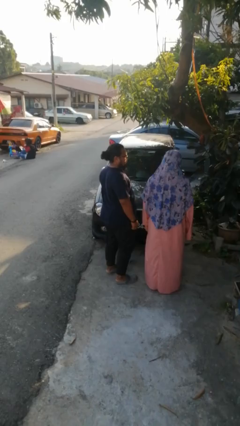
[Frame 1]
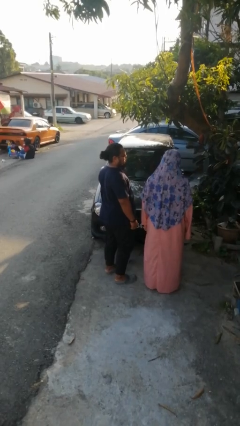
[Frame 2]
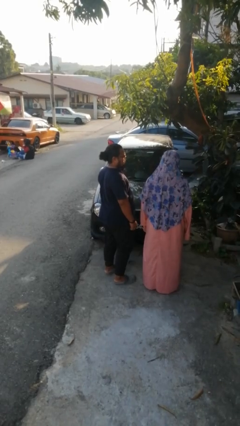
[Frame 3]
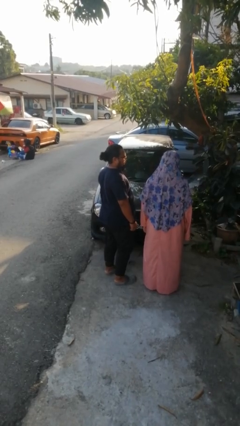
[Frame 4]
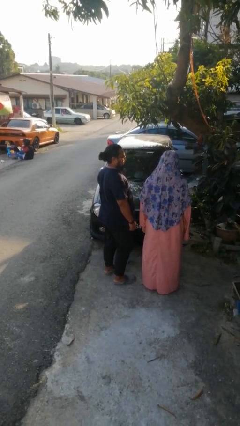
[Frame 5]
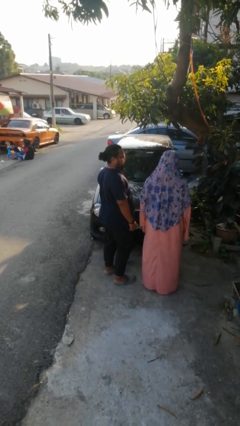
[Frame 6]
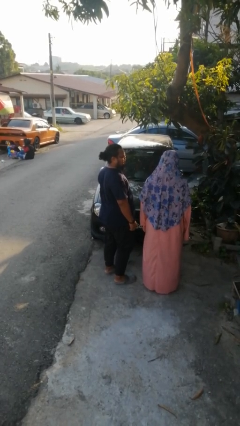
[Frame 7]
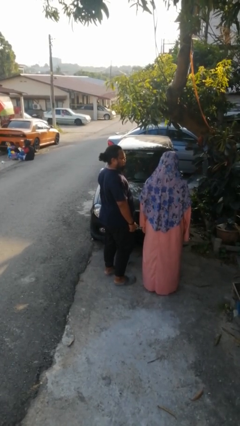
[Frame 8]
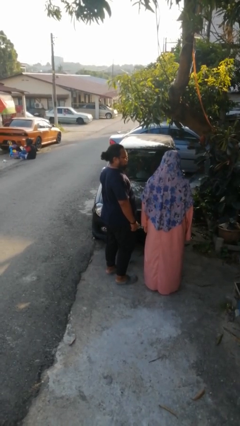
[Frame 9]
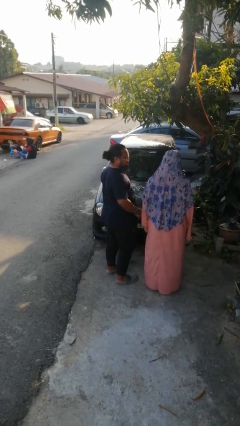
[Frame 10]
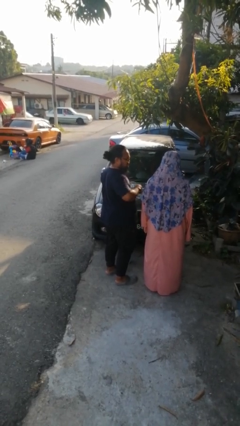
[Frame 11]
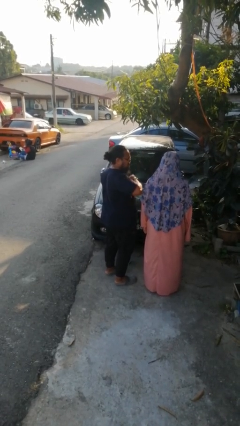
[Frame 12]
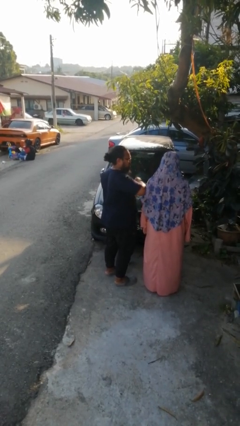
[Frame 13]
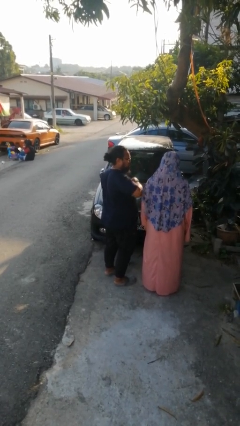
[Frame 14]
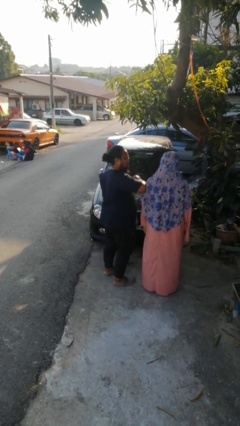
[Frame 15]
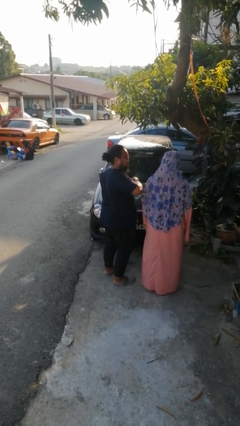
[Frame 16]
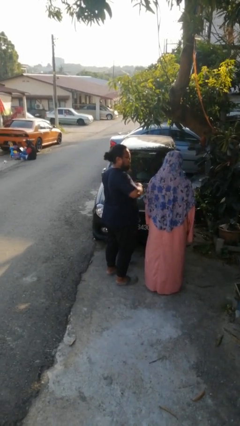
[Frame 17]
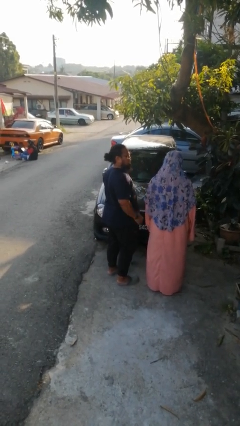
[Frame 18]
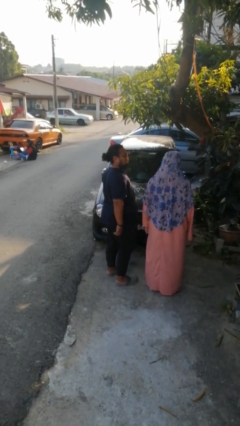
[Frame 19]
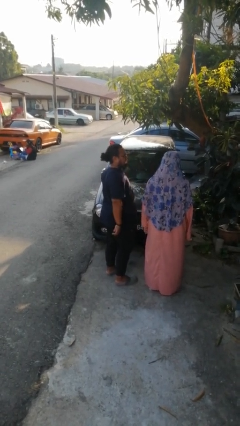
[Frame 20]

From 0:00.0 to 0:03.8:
person nudges person with elbow

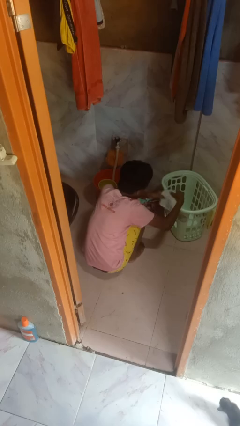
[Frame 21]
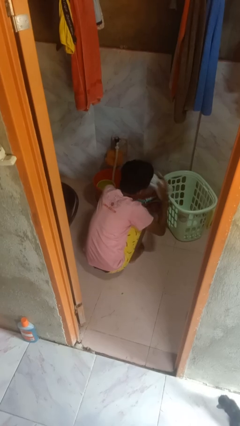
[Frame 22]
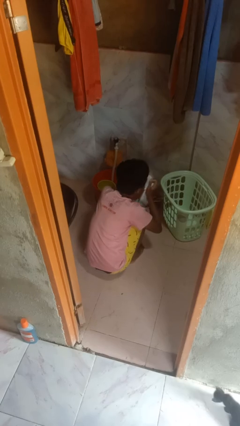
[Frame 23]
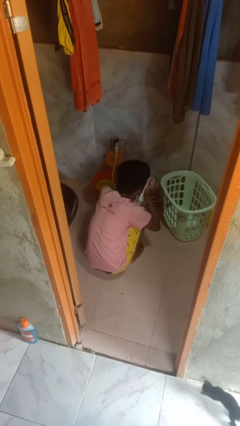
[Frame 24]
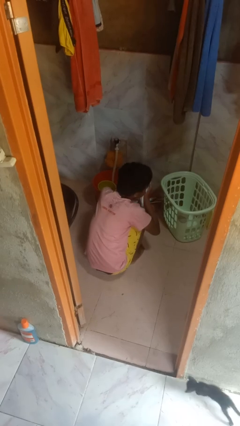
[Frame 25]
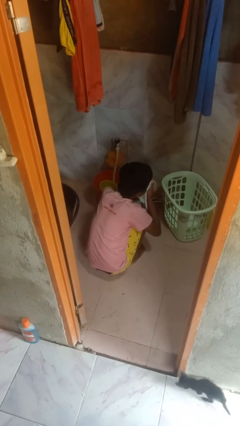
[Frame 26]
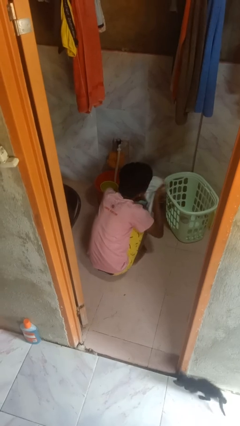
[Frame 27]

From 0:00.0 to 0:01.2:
person dries face with towel

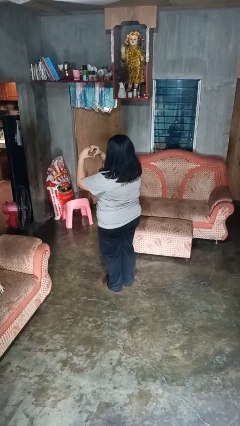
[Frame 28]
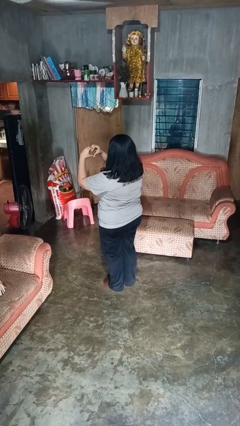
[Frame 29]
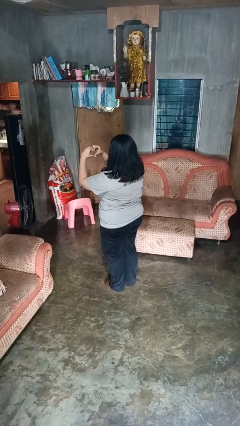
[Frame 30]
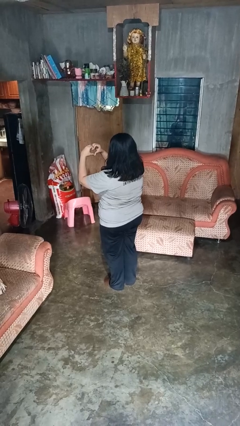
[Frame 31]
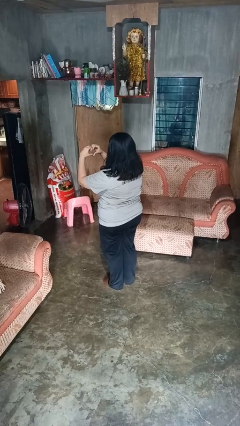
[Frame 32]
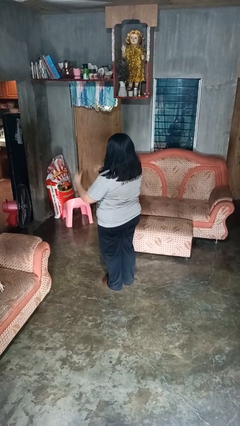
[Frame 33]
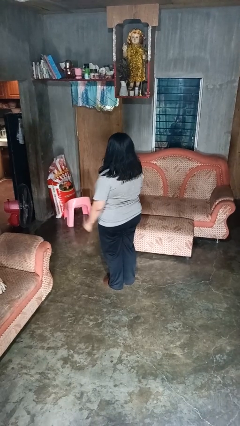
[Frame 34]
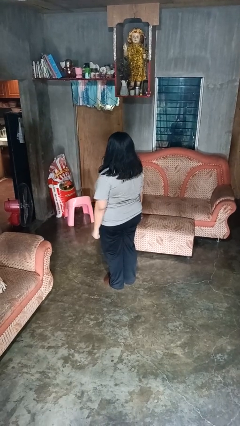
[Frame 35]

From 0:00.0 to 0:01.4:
person gestures heart

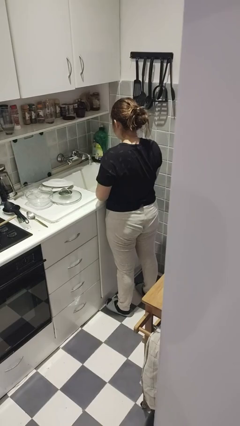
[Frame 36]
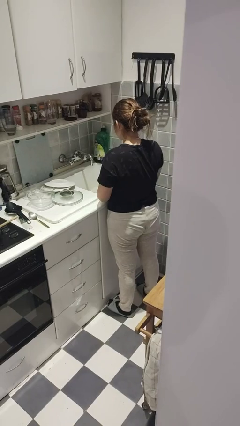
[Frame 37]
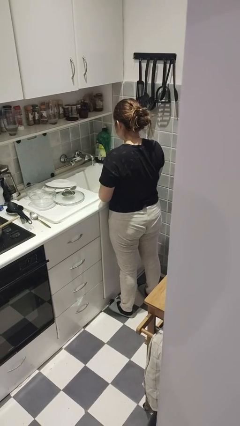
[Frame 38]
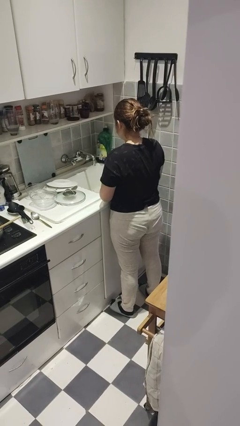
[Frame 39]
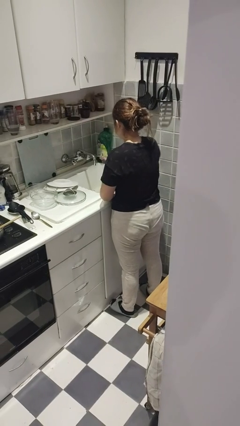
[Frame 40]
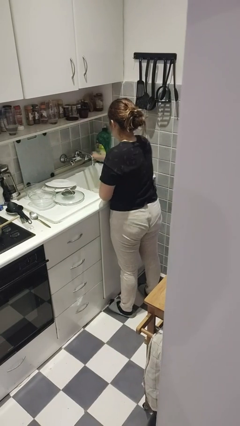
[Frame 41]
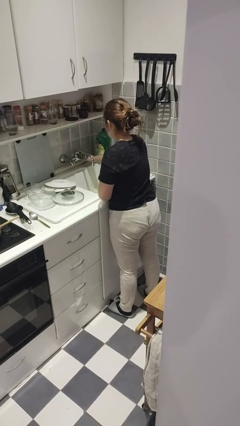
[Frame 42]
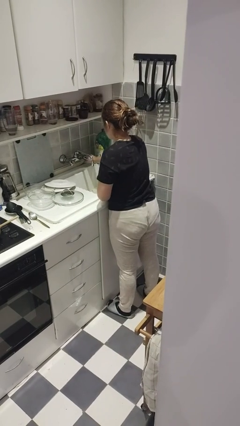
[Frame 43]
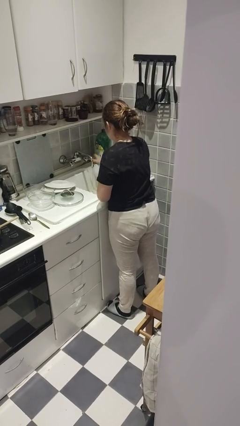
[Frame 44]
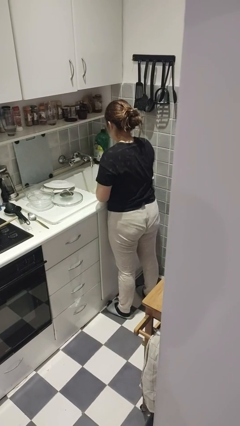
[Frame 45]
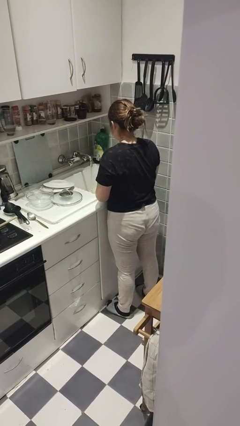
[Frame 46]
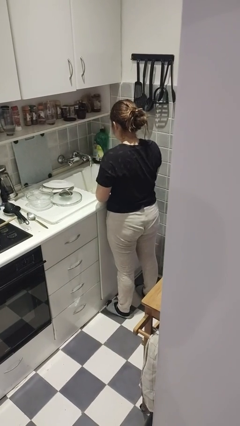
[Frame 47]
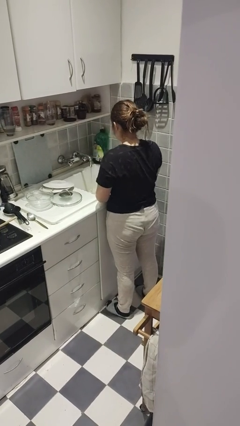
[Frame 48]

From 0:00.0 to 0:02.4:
person turns on faucet

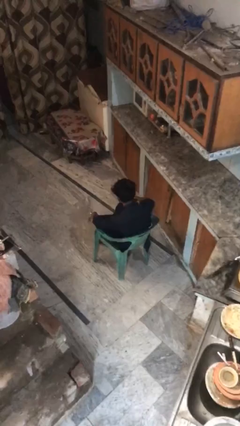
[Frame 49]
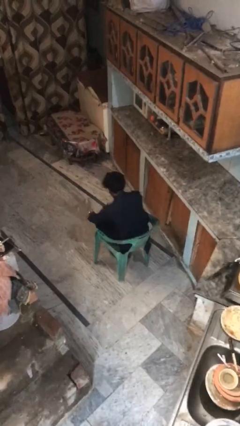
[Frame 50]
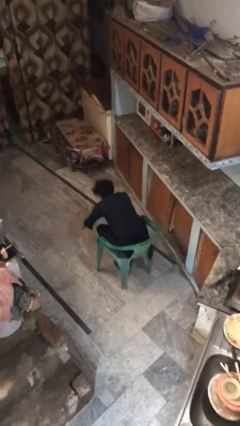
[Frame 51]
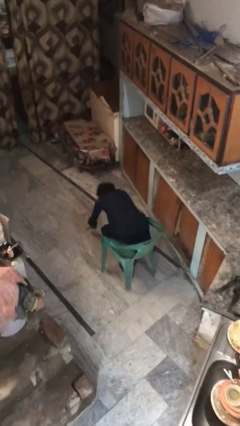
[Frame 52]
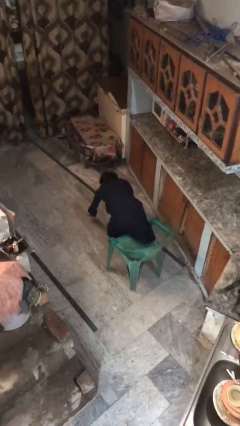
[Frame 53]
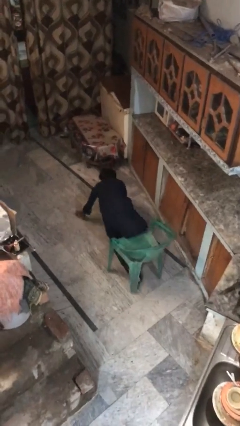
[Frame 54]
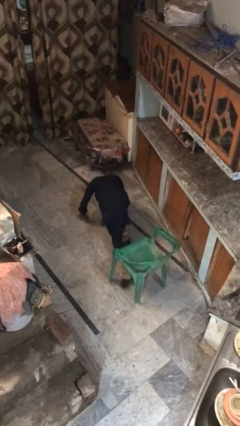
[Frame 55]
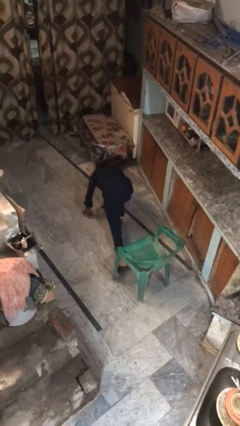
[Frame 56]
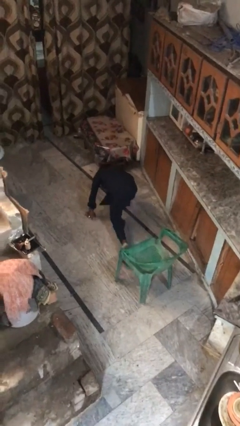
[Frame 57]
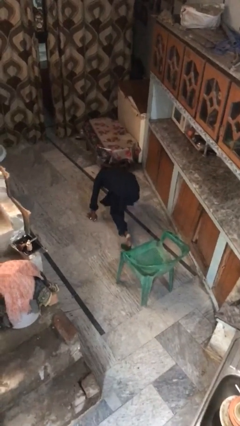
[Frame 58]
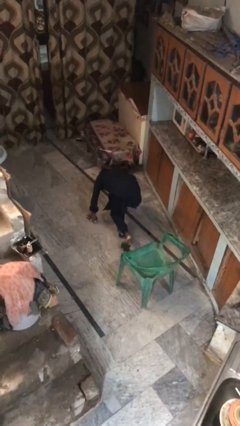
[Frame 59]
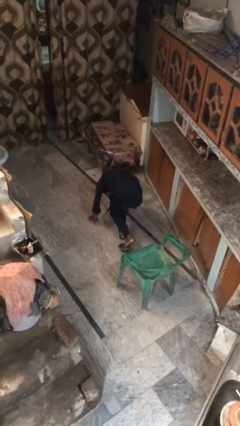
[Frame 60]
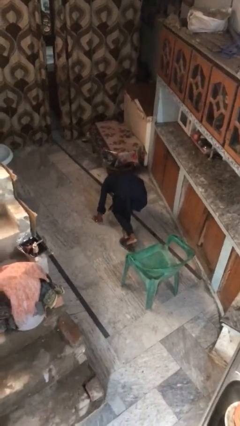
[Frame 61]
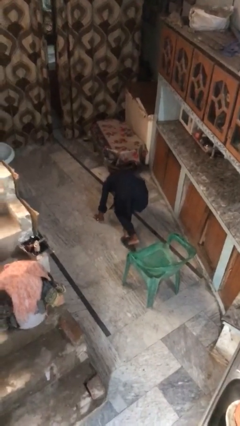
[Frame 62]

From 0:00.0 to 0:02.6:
person falls from chair

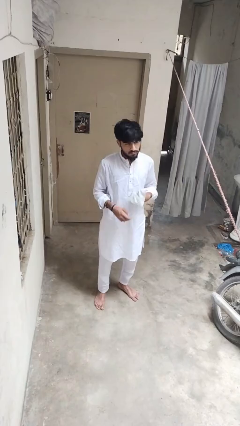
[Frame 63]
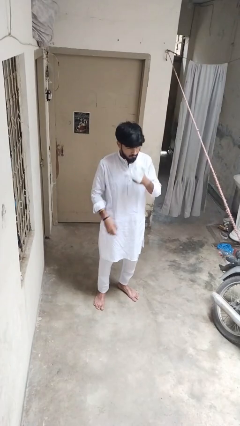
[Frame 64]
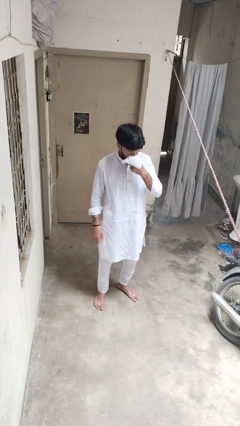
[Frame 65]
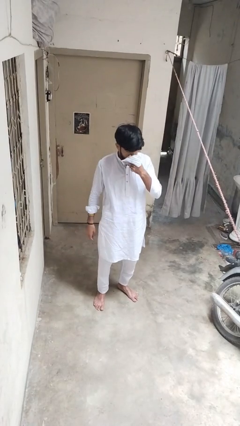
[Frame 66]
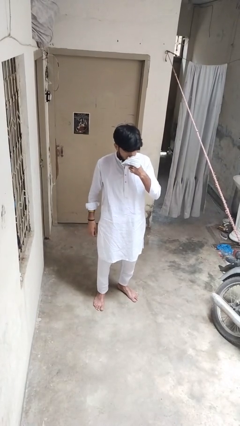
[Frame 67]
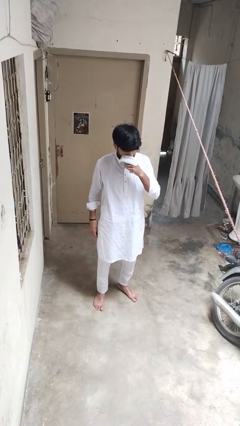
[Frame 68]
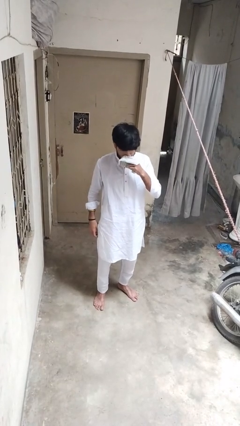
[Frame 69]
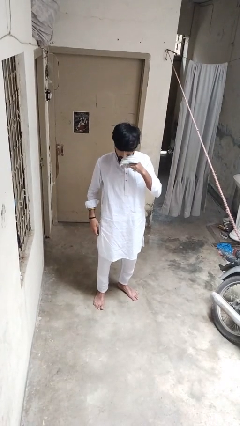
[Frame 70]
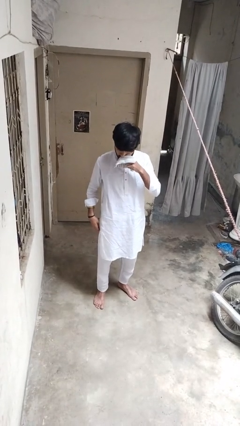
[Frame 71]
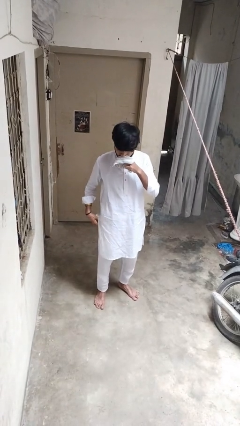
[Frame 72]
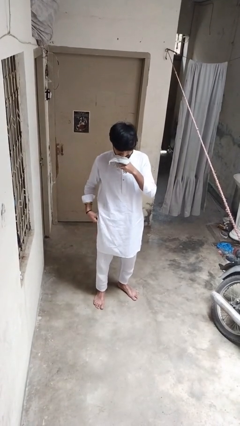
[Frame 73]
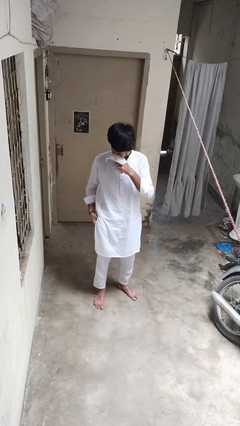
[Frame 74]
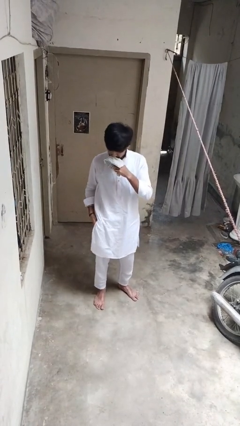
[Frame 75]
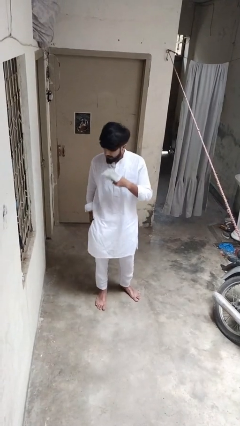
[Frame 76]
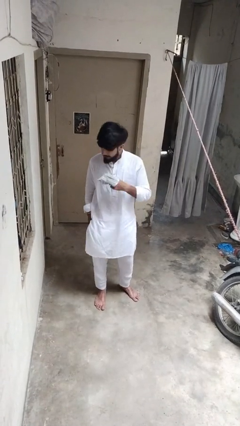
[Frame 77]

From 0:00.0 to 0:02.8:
person blows nose

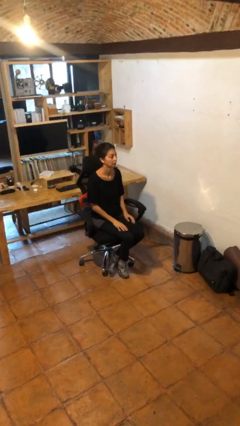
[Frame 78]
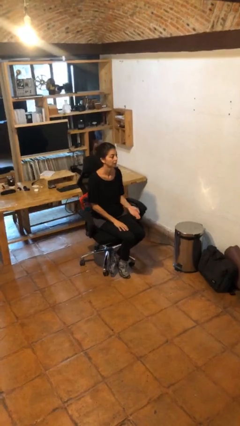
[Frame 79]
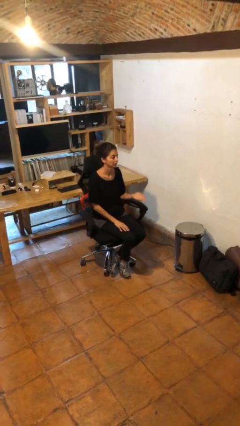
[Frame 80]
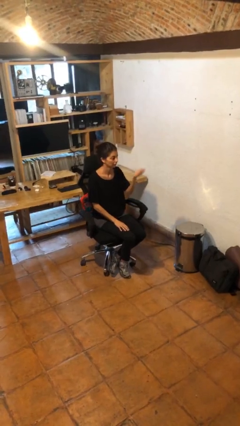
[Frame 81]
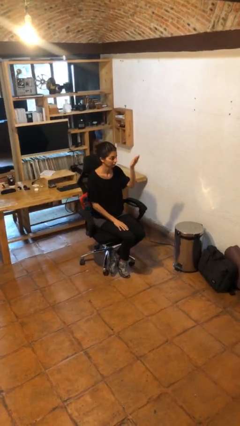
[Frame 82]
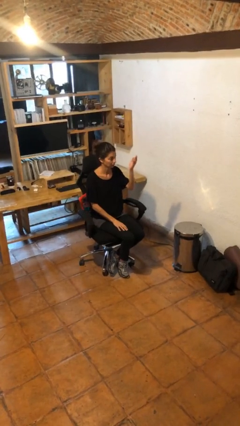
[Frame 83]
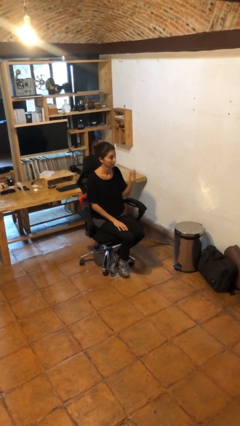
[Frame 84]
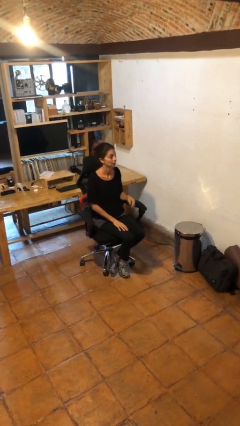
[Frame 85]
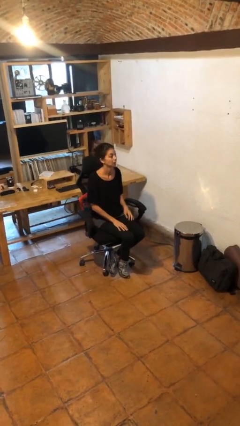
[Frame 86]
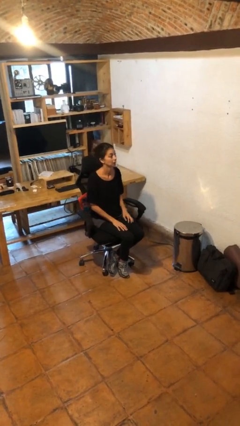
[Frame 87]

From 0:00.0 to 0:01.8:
person gestures swipe up

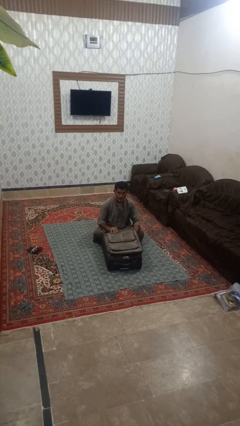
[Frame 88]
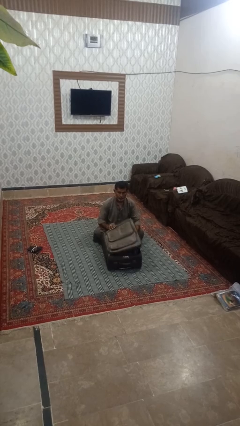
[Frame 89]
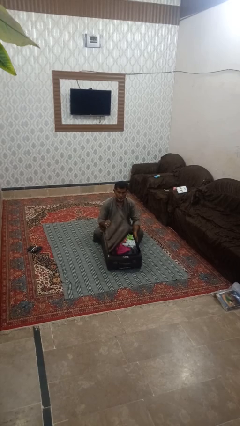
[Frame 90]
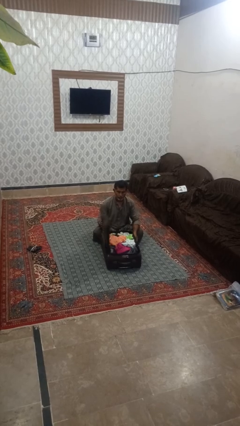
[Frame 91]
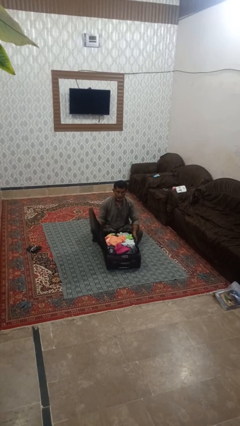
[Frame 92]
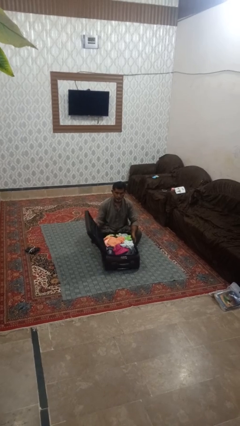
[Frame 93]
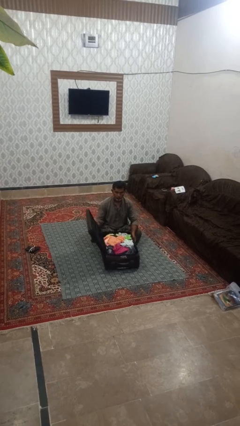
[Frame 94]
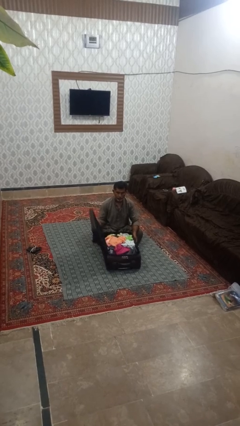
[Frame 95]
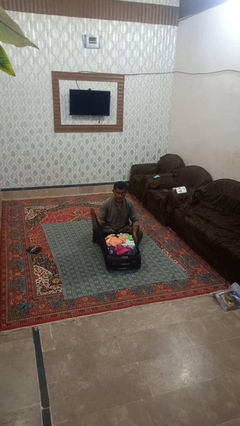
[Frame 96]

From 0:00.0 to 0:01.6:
person opens suitcase
